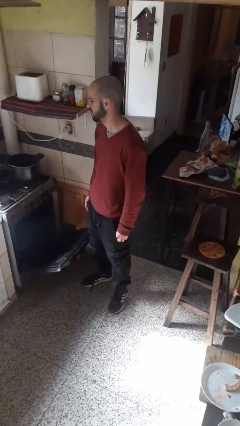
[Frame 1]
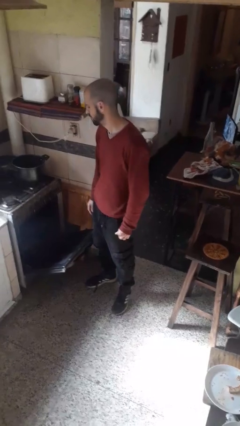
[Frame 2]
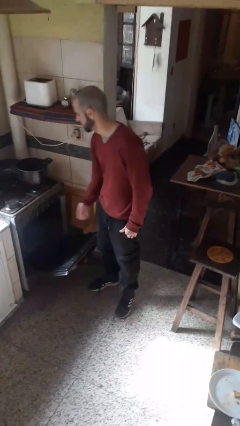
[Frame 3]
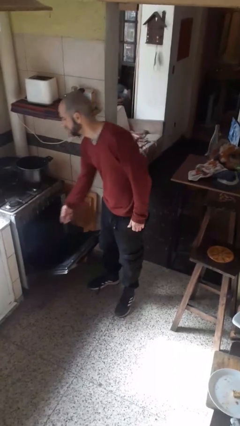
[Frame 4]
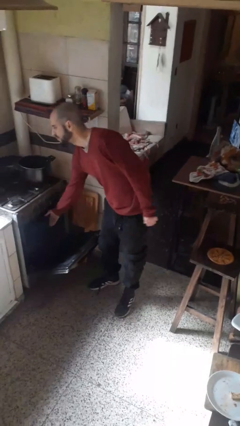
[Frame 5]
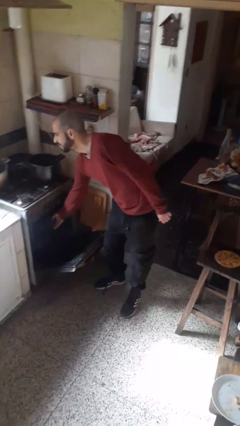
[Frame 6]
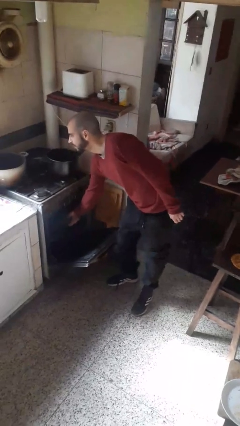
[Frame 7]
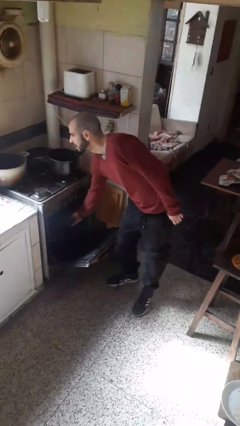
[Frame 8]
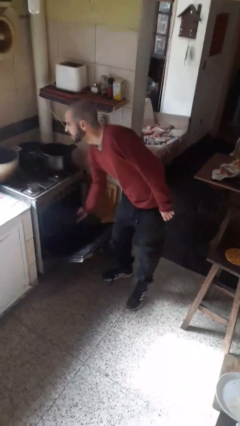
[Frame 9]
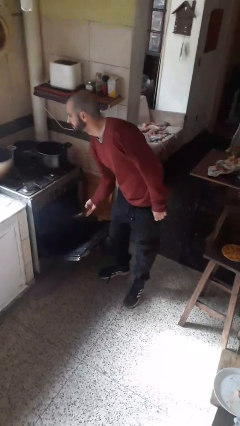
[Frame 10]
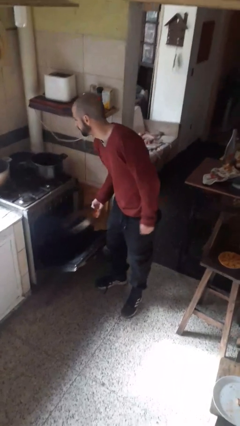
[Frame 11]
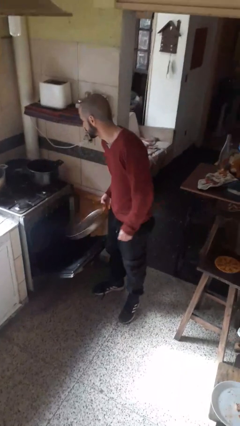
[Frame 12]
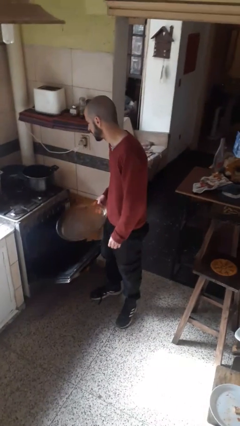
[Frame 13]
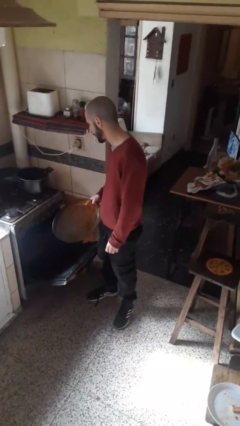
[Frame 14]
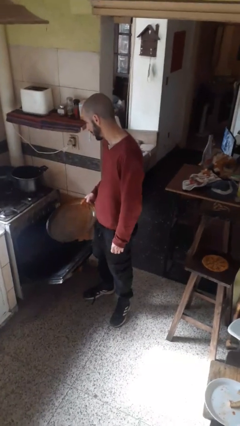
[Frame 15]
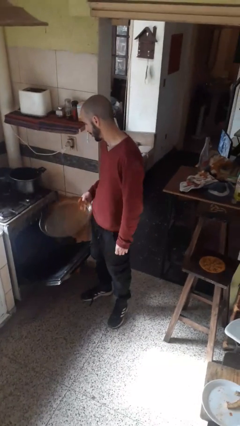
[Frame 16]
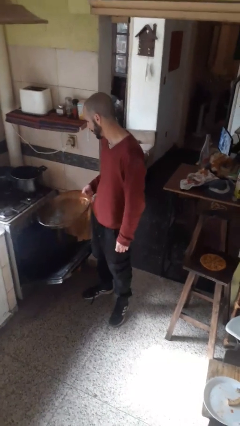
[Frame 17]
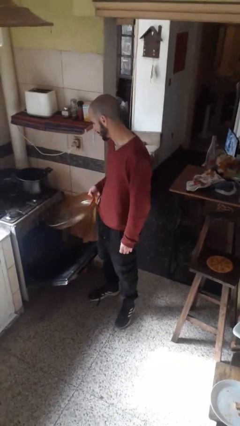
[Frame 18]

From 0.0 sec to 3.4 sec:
person takes object from oven

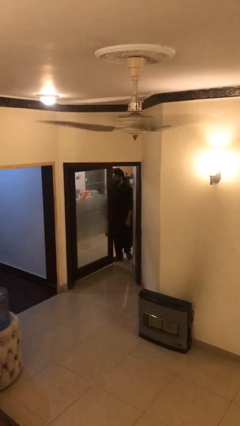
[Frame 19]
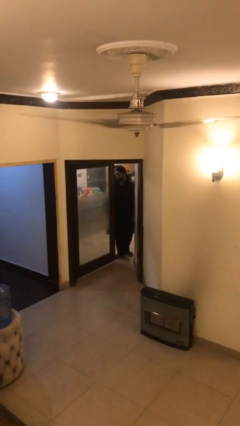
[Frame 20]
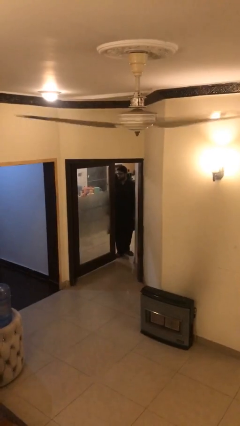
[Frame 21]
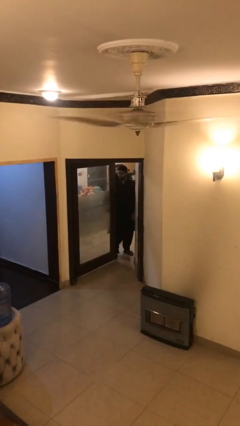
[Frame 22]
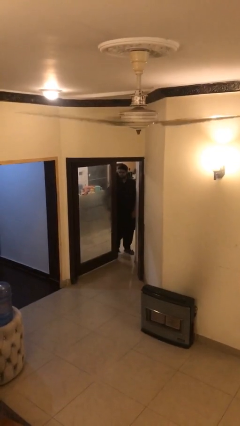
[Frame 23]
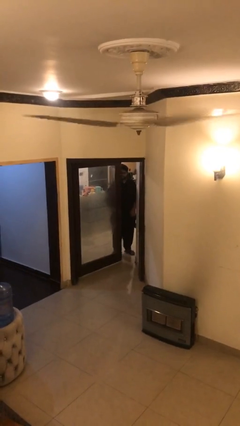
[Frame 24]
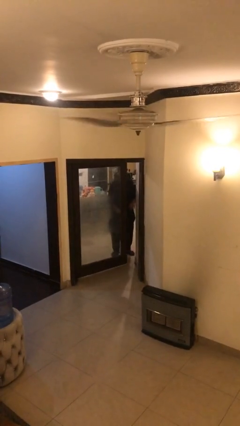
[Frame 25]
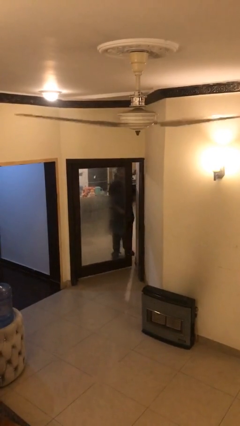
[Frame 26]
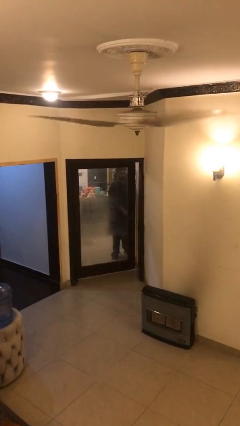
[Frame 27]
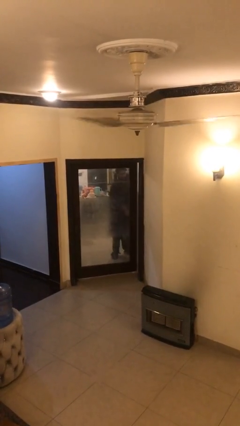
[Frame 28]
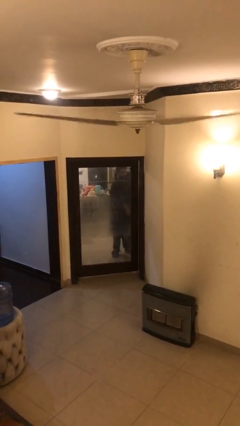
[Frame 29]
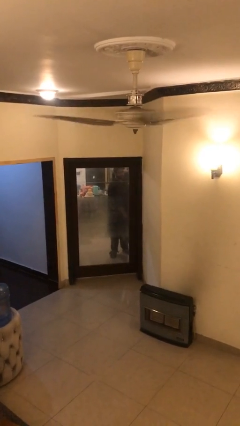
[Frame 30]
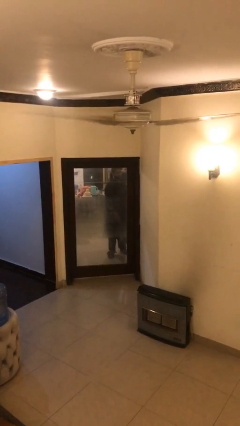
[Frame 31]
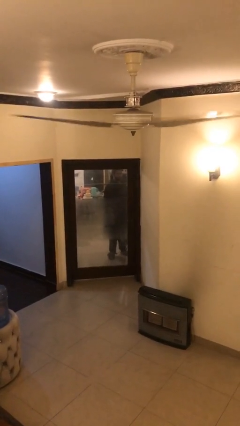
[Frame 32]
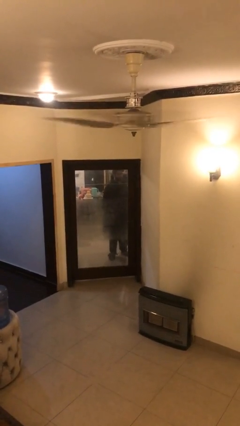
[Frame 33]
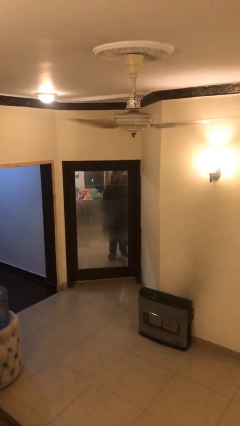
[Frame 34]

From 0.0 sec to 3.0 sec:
person closes facility door

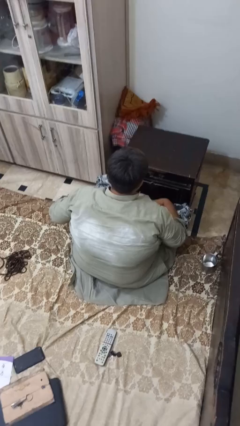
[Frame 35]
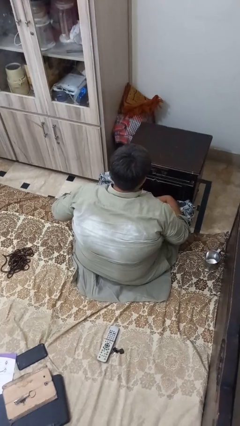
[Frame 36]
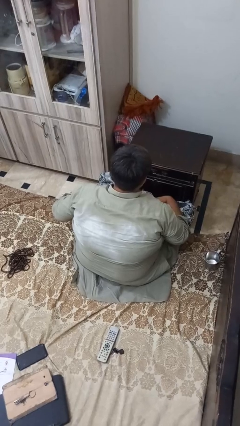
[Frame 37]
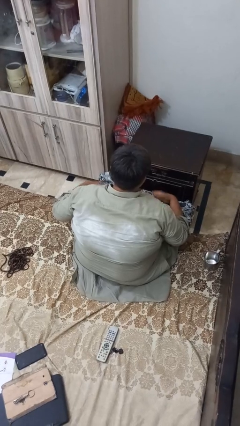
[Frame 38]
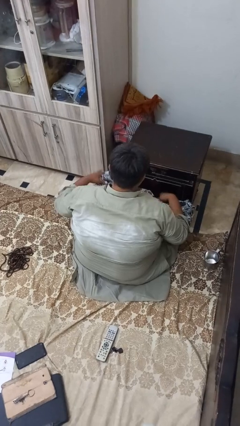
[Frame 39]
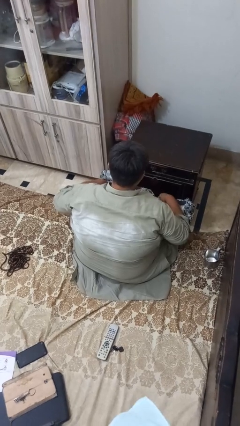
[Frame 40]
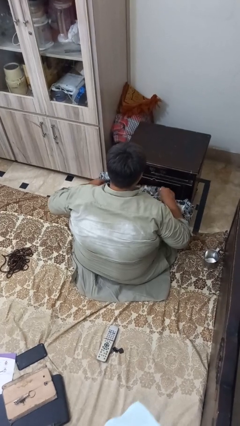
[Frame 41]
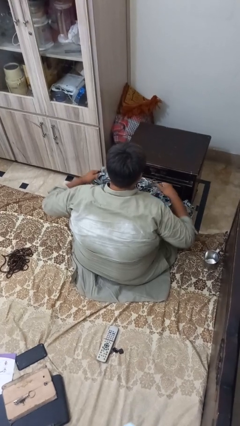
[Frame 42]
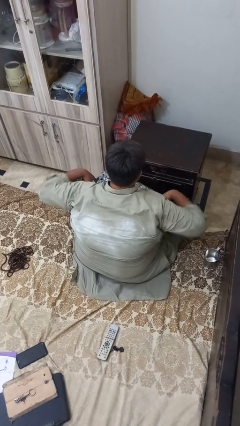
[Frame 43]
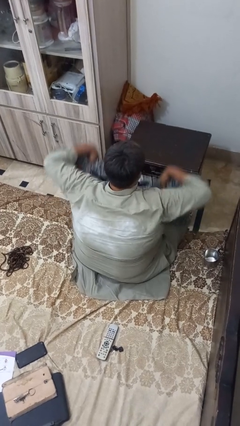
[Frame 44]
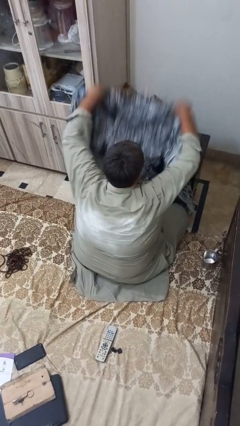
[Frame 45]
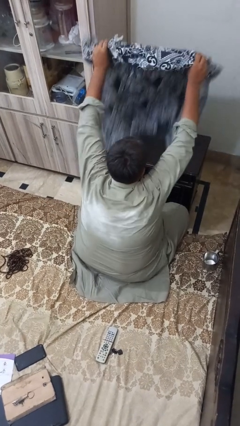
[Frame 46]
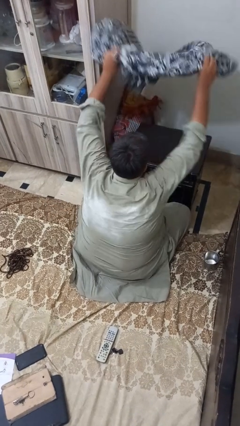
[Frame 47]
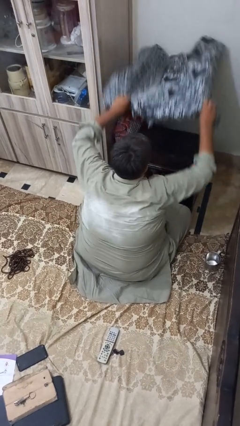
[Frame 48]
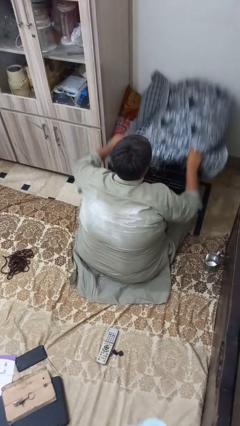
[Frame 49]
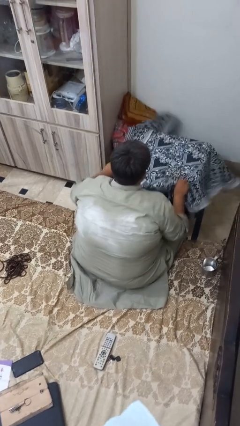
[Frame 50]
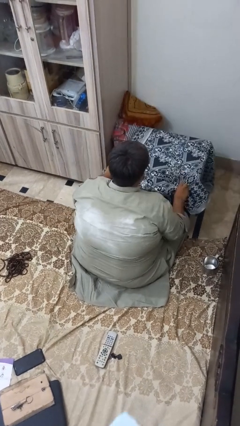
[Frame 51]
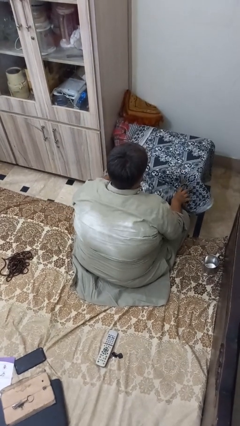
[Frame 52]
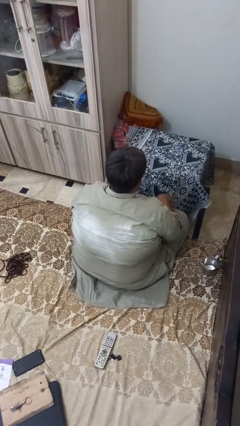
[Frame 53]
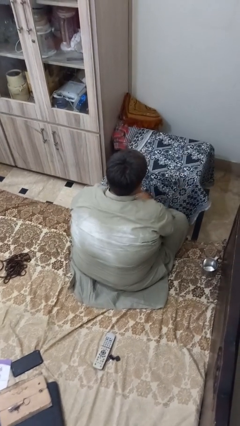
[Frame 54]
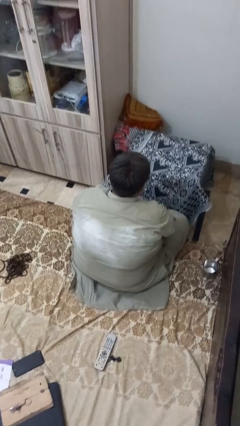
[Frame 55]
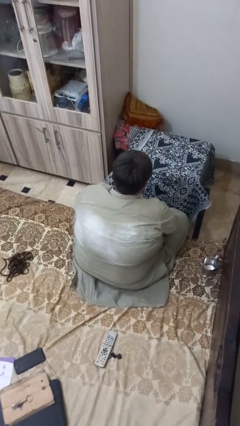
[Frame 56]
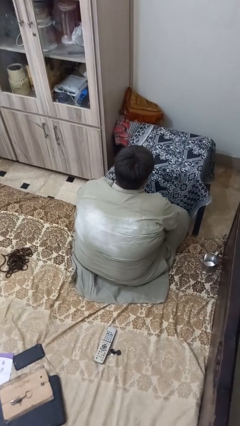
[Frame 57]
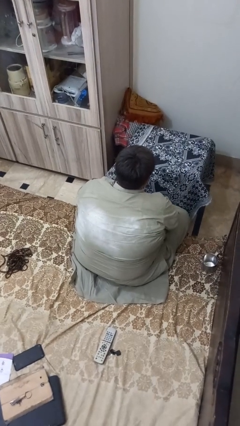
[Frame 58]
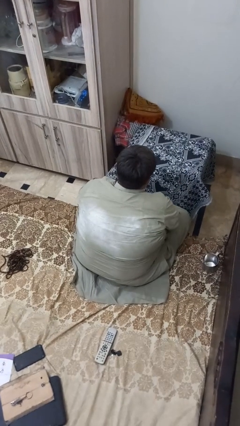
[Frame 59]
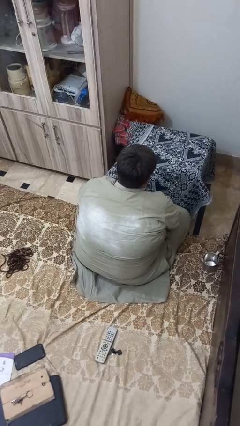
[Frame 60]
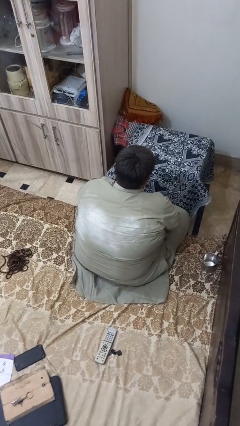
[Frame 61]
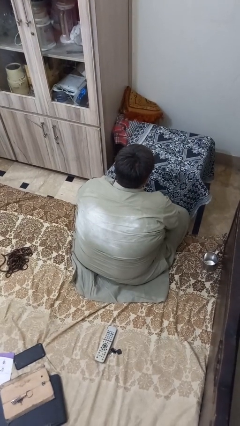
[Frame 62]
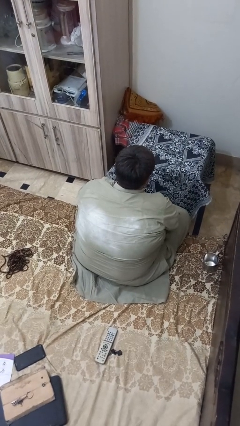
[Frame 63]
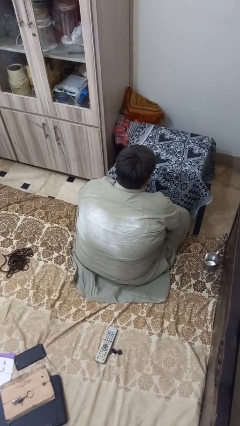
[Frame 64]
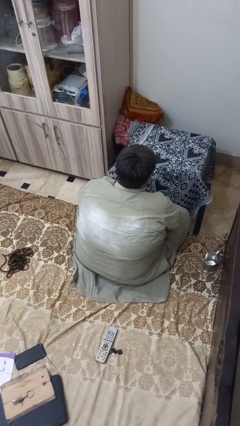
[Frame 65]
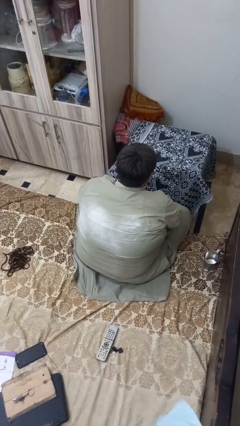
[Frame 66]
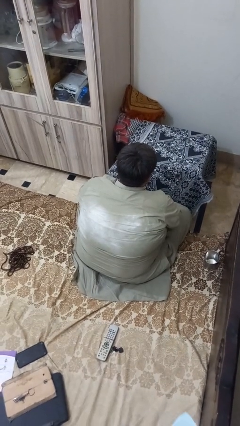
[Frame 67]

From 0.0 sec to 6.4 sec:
person spreads tablecloth

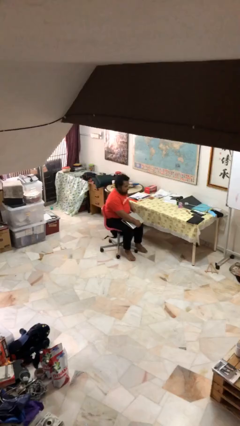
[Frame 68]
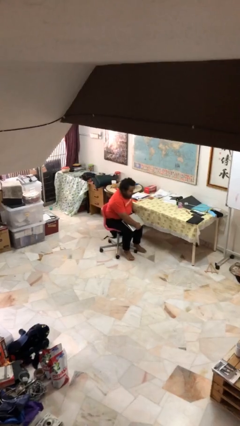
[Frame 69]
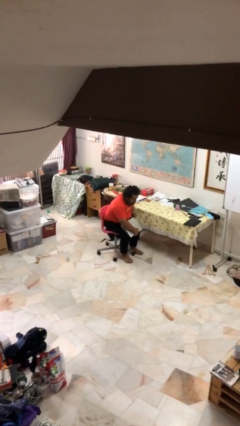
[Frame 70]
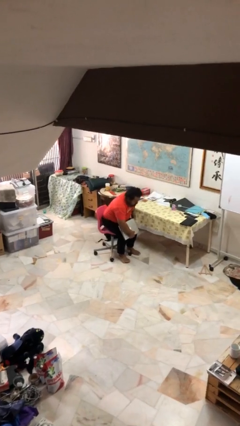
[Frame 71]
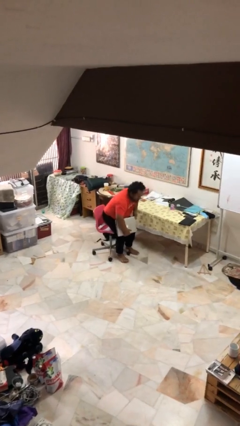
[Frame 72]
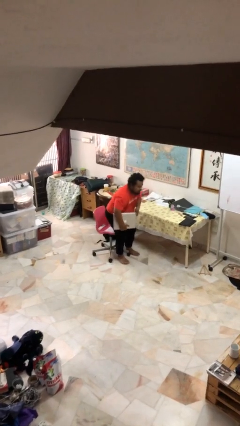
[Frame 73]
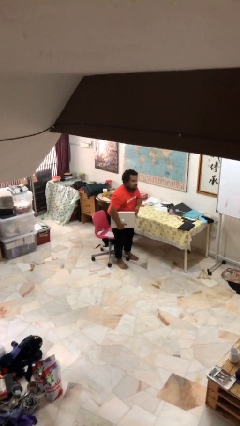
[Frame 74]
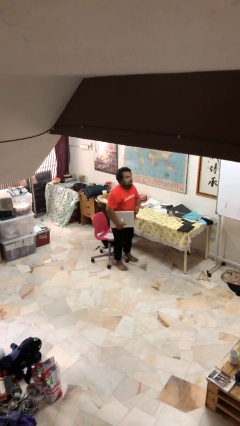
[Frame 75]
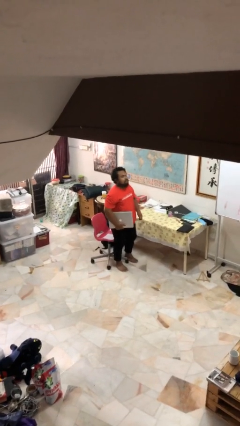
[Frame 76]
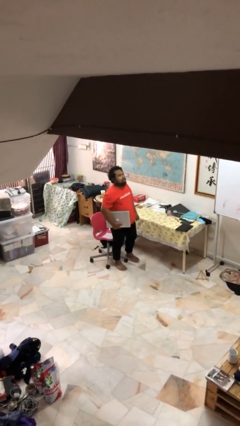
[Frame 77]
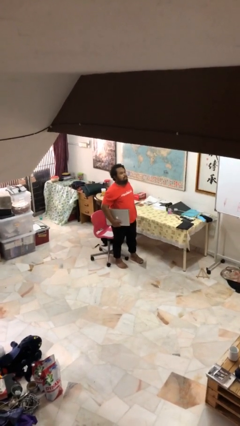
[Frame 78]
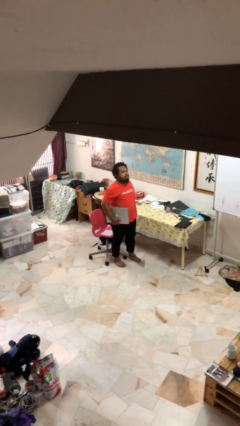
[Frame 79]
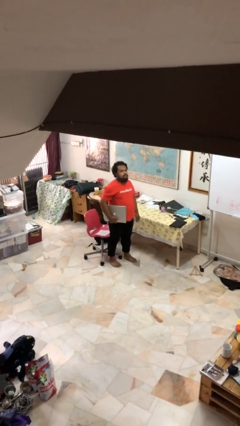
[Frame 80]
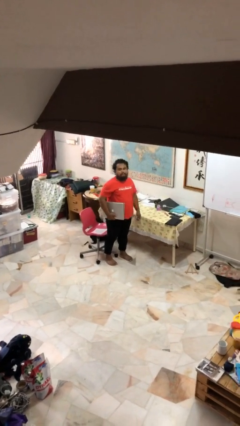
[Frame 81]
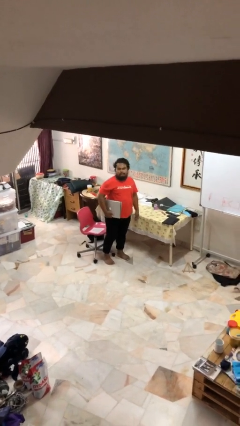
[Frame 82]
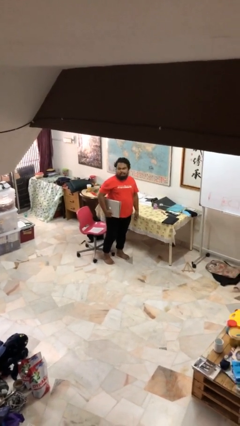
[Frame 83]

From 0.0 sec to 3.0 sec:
person stands up

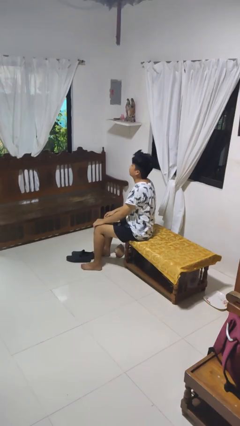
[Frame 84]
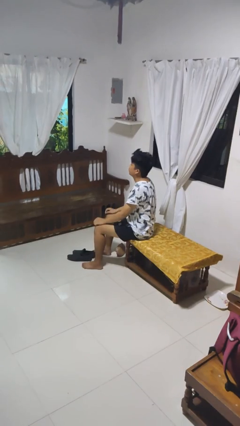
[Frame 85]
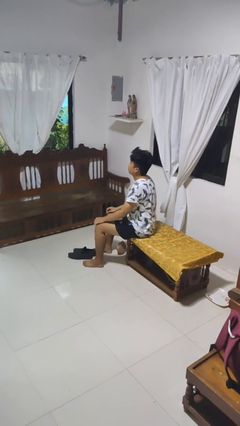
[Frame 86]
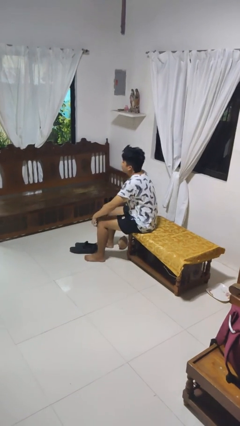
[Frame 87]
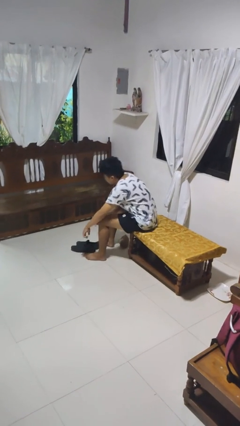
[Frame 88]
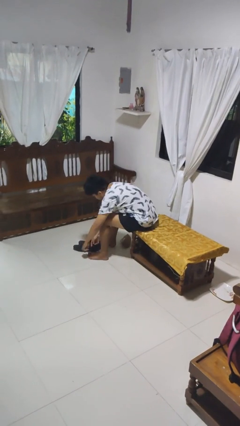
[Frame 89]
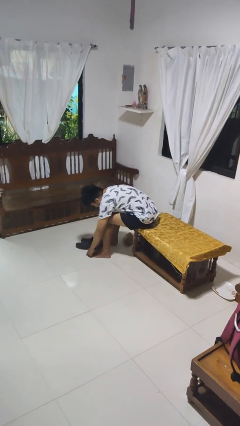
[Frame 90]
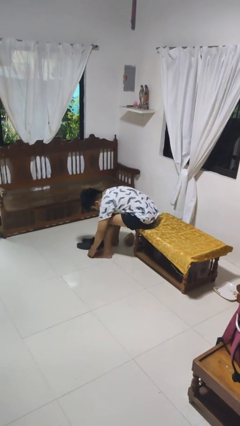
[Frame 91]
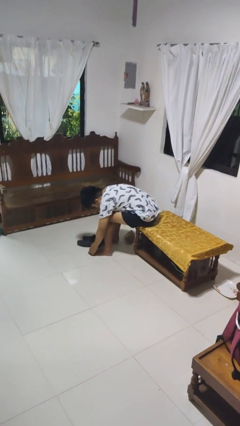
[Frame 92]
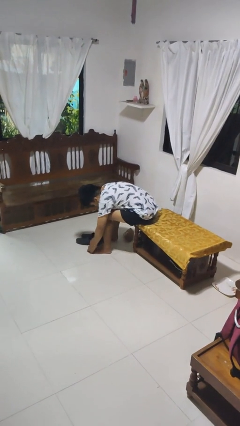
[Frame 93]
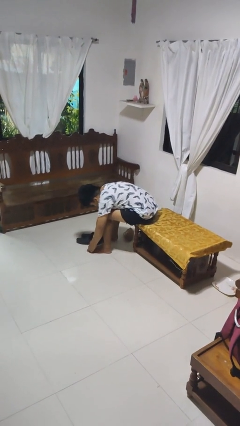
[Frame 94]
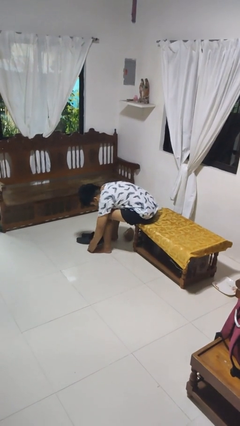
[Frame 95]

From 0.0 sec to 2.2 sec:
person rubs foot
